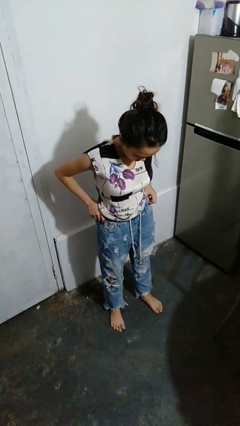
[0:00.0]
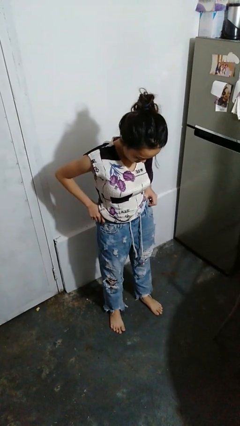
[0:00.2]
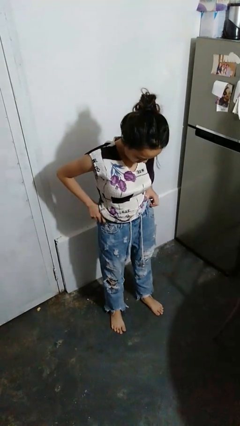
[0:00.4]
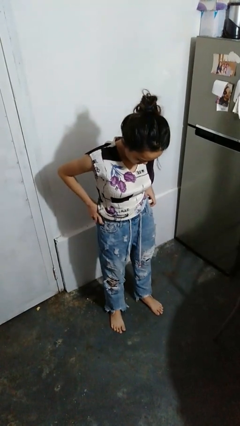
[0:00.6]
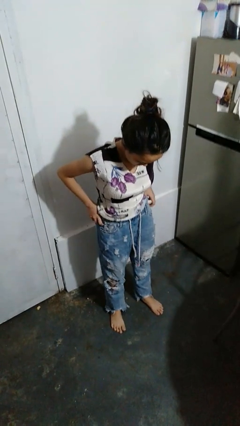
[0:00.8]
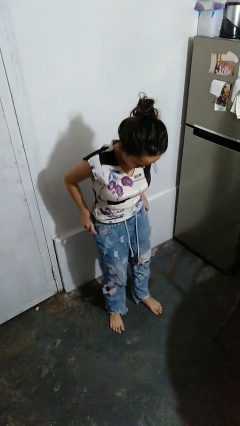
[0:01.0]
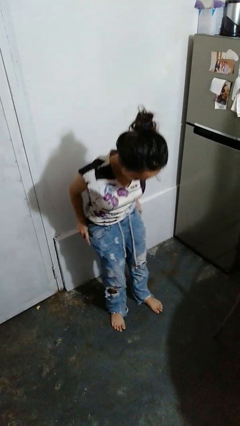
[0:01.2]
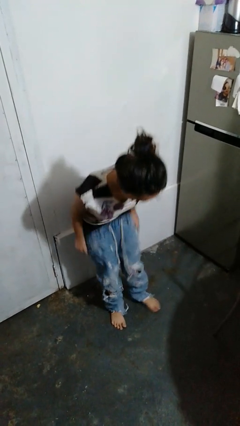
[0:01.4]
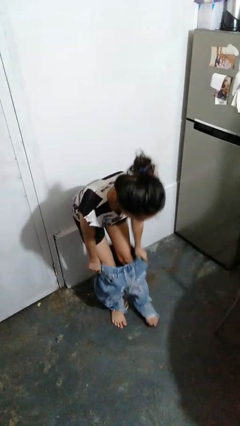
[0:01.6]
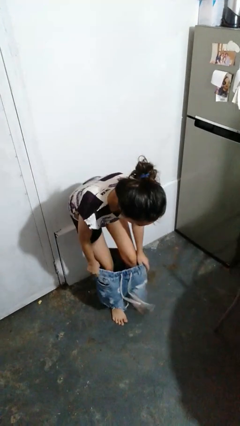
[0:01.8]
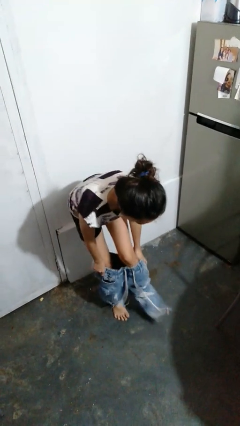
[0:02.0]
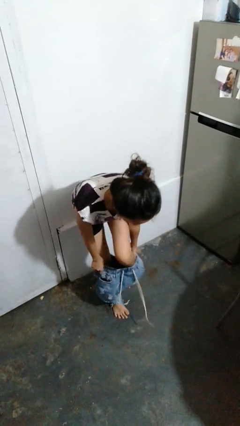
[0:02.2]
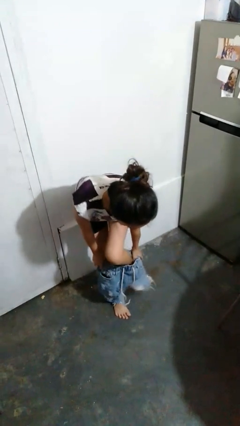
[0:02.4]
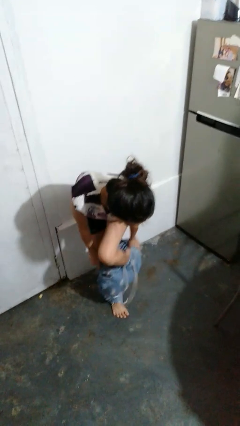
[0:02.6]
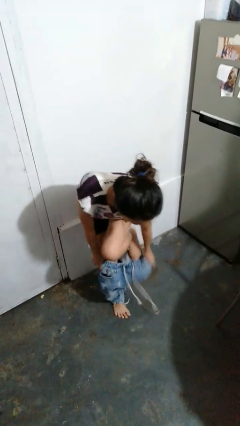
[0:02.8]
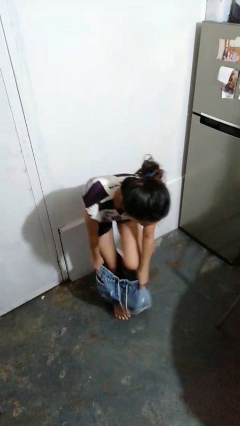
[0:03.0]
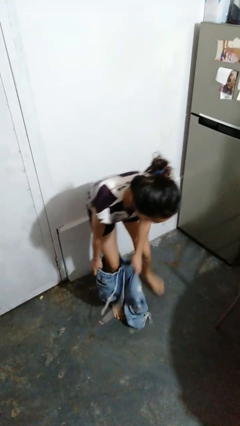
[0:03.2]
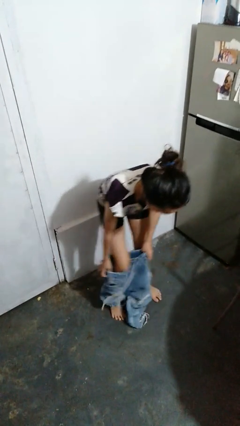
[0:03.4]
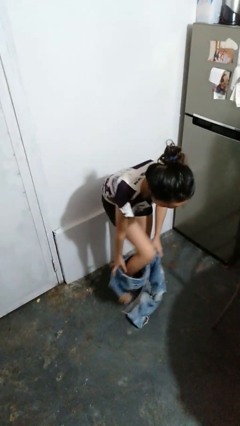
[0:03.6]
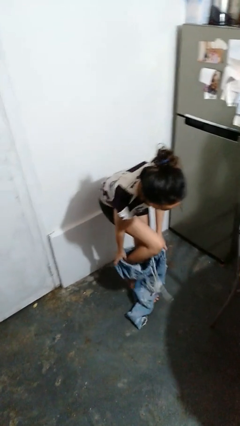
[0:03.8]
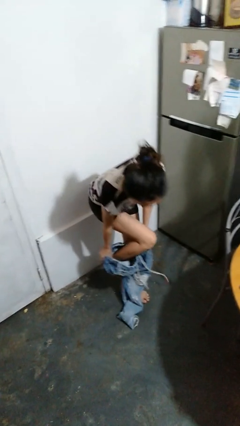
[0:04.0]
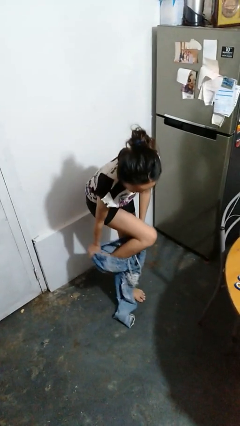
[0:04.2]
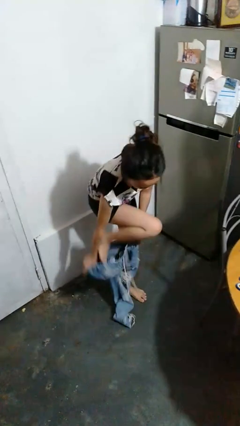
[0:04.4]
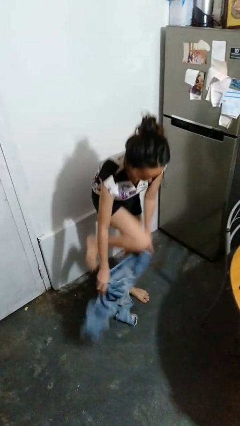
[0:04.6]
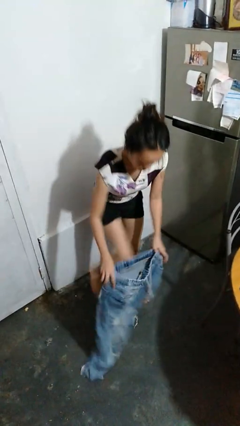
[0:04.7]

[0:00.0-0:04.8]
person takes off pants

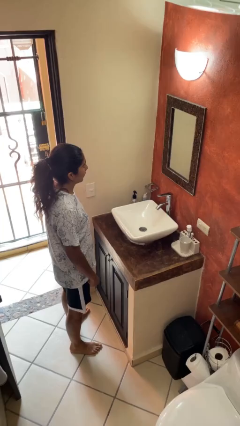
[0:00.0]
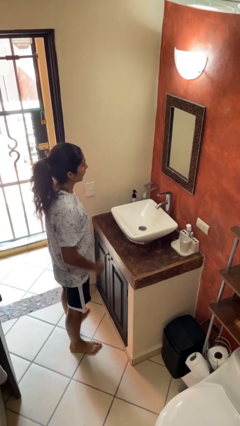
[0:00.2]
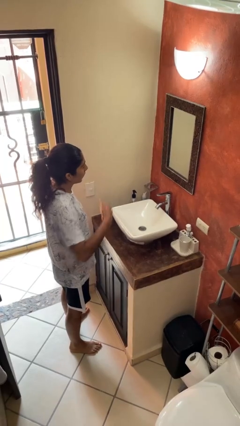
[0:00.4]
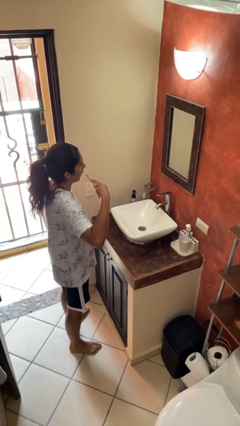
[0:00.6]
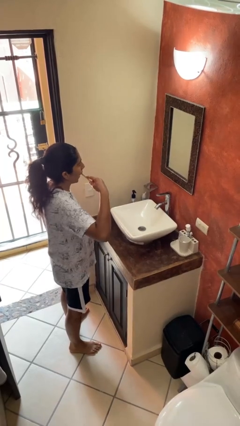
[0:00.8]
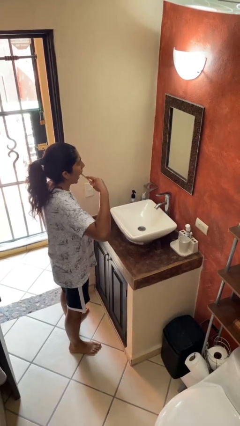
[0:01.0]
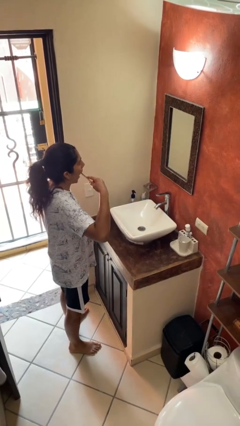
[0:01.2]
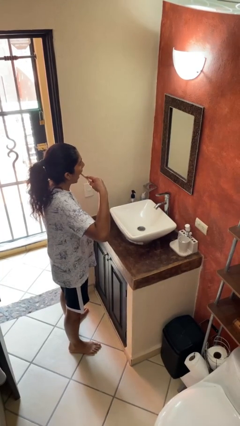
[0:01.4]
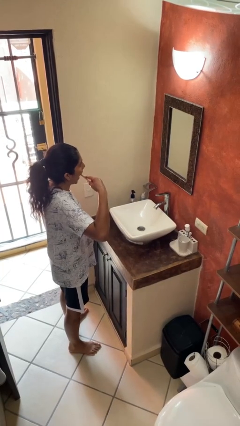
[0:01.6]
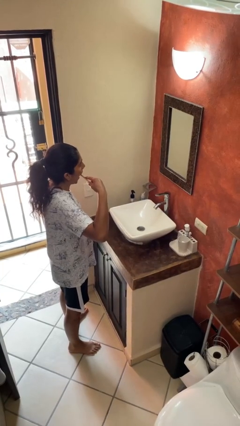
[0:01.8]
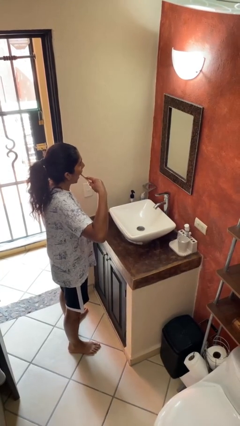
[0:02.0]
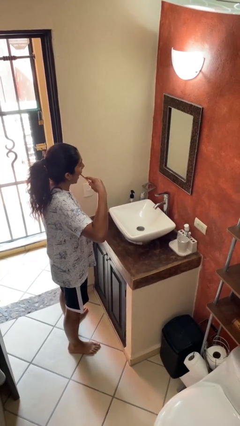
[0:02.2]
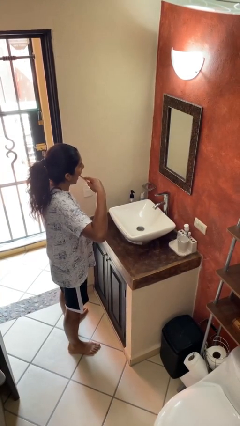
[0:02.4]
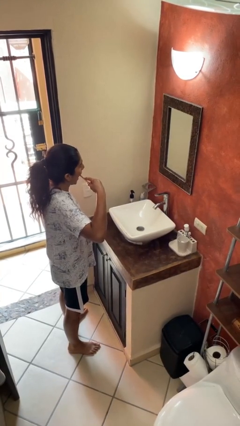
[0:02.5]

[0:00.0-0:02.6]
person brushes teeth

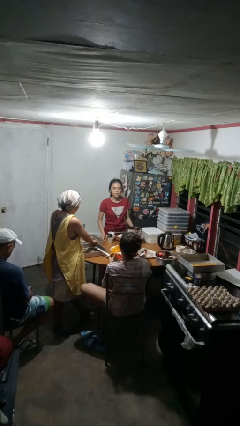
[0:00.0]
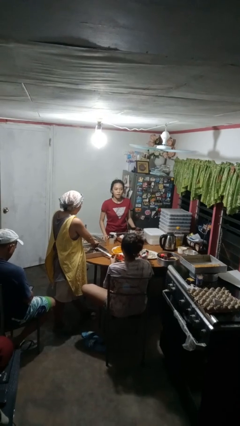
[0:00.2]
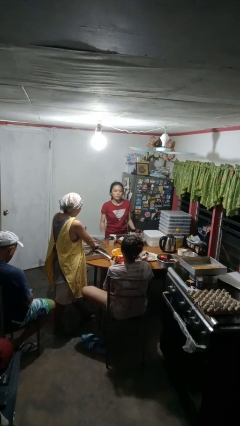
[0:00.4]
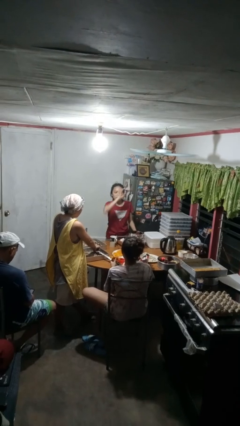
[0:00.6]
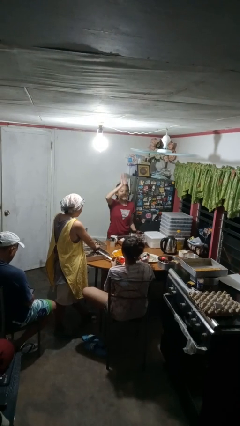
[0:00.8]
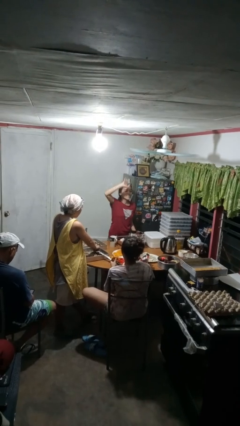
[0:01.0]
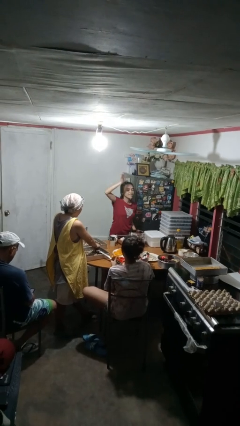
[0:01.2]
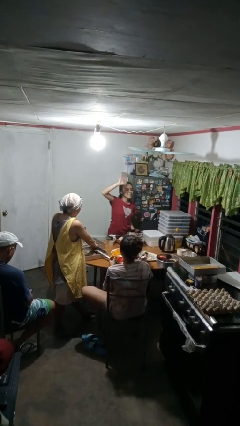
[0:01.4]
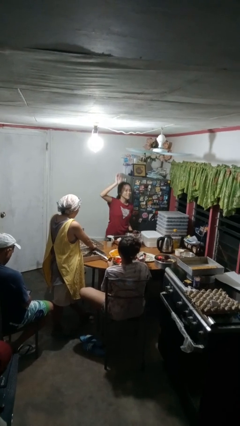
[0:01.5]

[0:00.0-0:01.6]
person waves at person

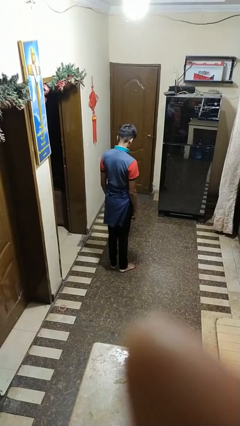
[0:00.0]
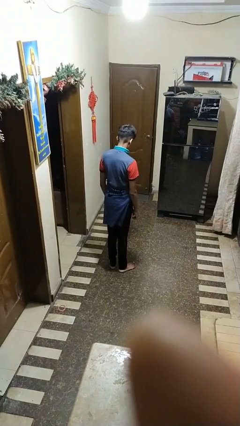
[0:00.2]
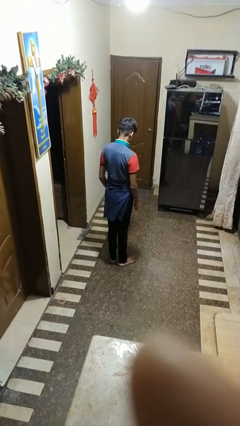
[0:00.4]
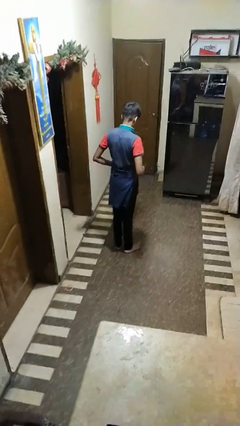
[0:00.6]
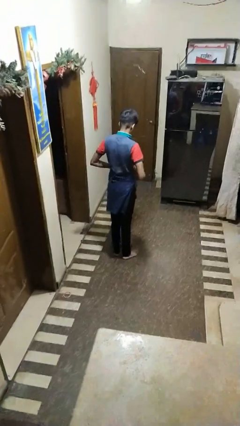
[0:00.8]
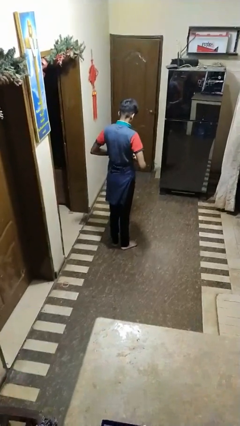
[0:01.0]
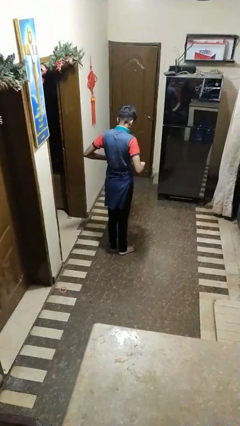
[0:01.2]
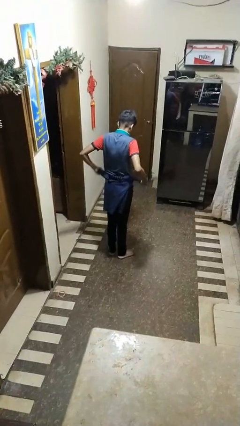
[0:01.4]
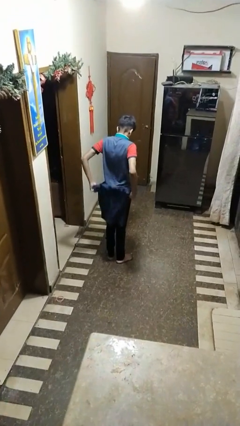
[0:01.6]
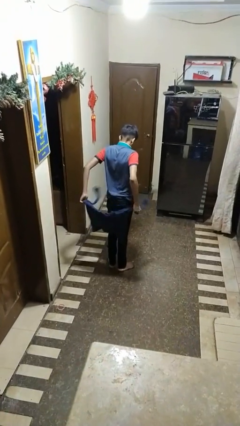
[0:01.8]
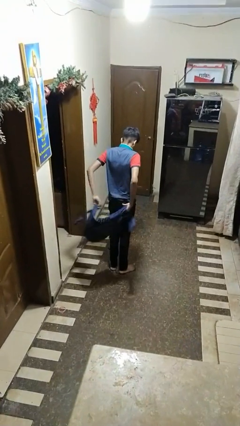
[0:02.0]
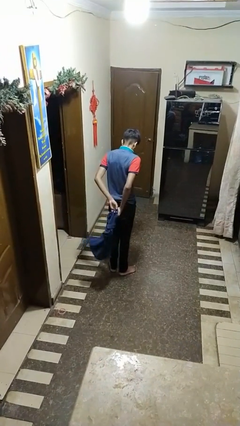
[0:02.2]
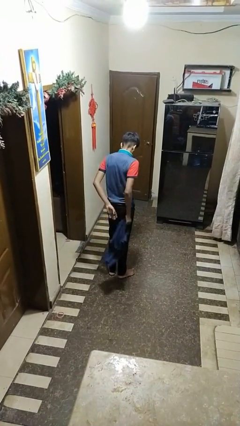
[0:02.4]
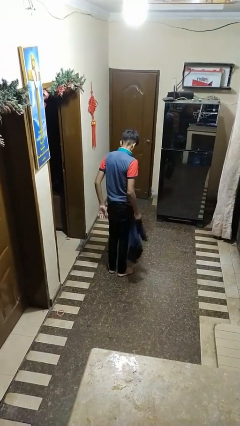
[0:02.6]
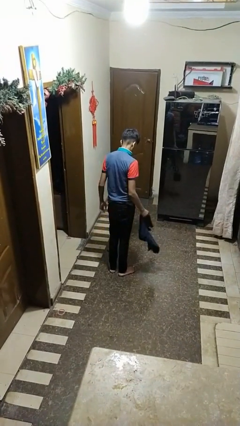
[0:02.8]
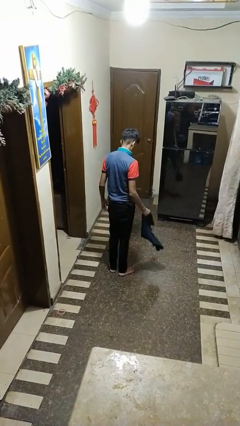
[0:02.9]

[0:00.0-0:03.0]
person unties jacket around waist

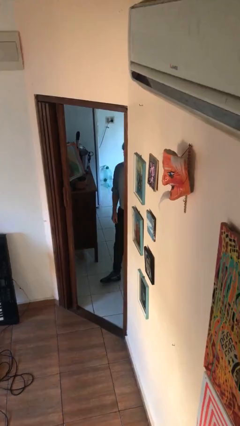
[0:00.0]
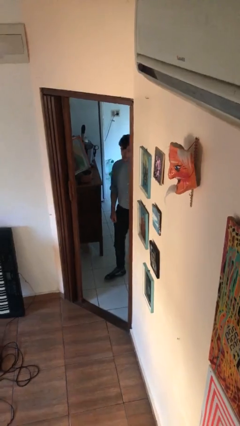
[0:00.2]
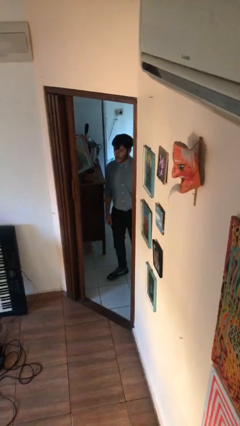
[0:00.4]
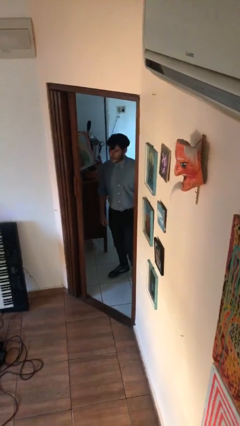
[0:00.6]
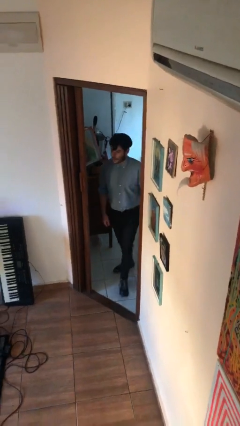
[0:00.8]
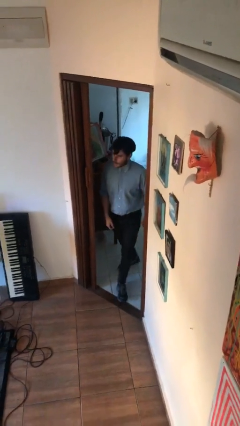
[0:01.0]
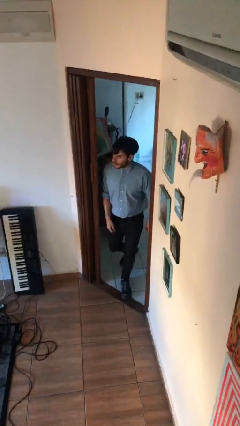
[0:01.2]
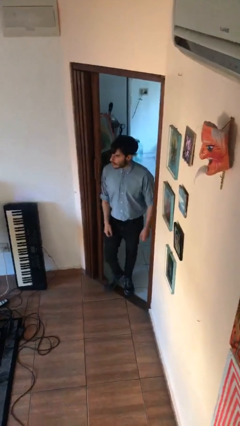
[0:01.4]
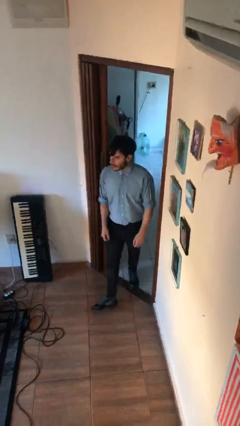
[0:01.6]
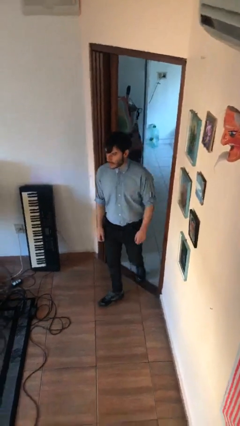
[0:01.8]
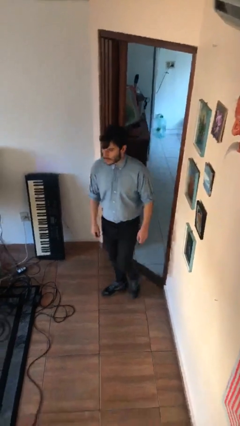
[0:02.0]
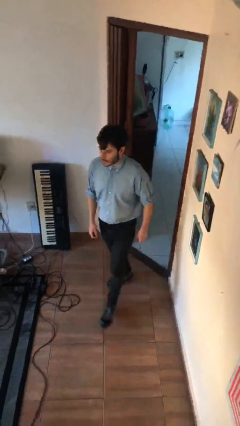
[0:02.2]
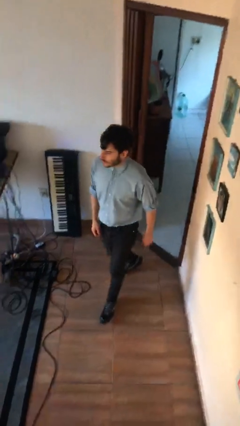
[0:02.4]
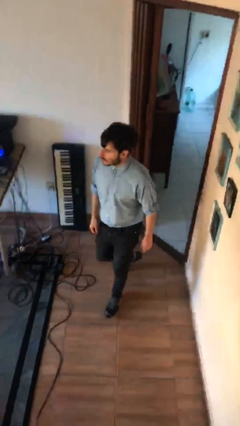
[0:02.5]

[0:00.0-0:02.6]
person enters scene through structure

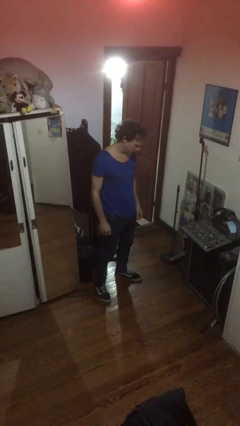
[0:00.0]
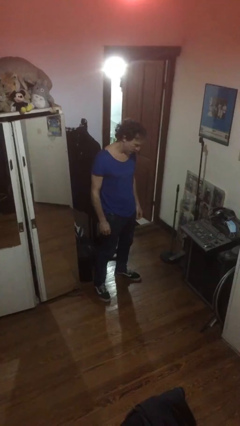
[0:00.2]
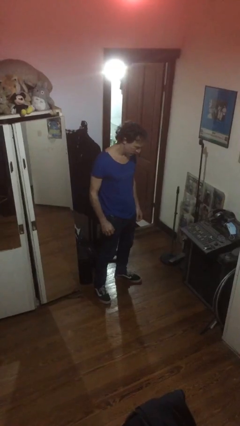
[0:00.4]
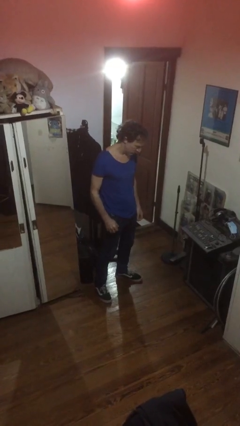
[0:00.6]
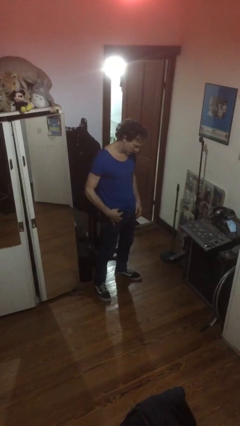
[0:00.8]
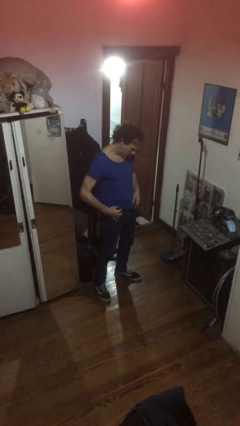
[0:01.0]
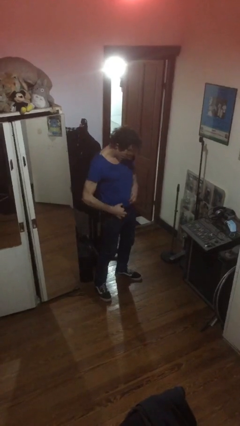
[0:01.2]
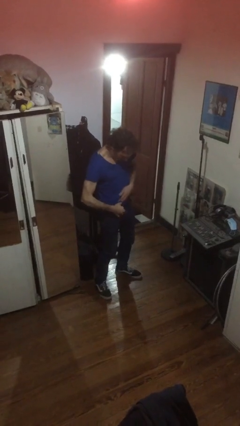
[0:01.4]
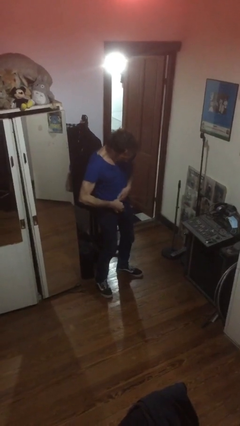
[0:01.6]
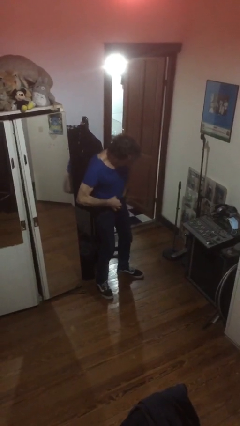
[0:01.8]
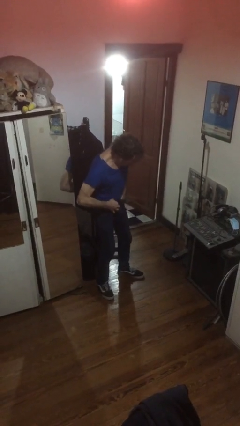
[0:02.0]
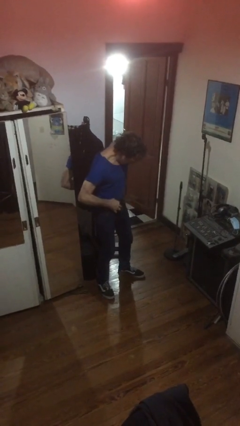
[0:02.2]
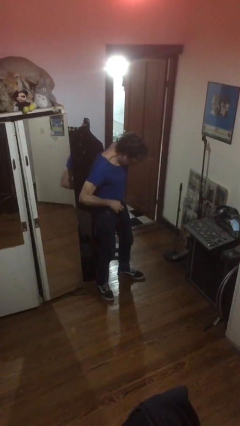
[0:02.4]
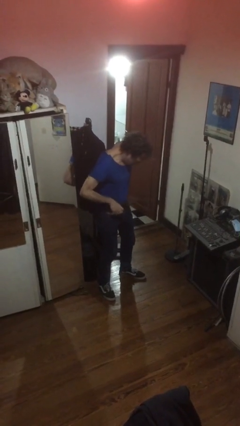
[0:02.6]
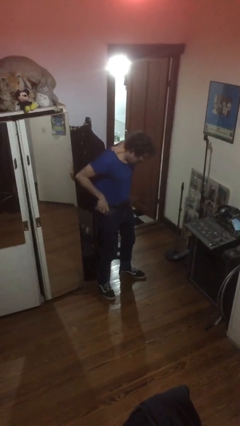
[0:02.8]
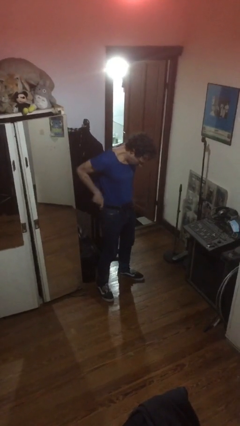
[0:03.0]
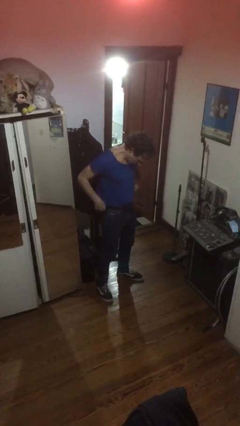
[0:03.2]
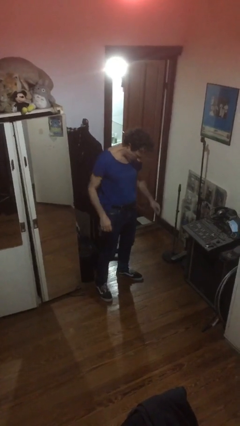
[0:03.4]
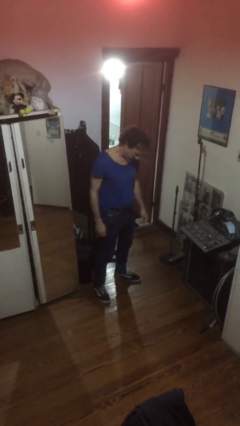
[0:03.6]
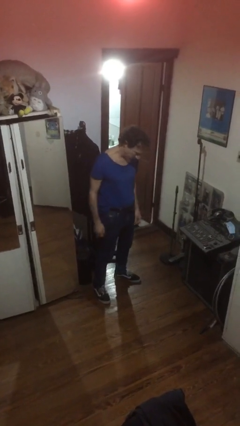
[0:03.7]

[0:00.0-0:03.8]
person tucks in shirt
